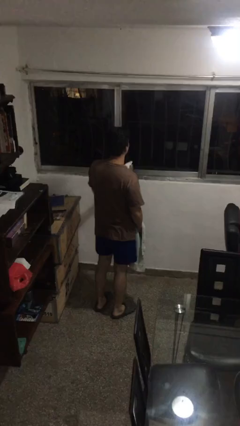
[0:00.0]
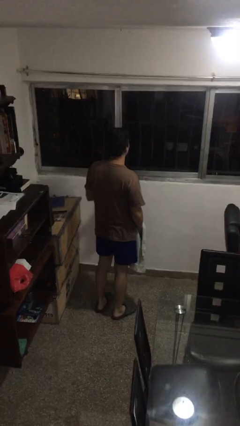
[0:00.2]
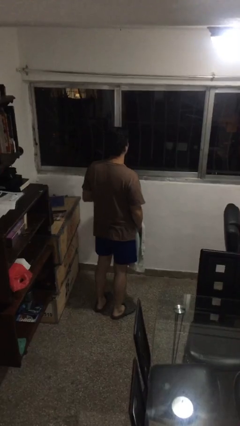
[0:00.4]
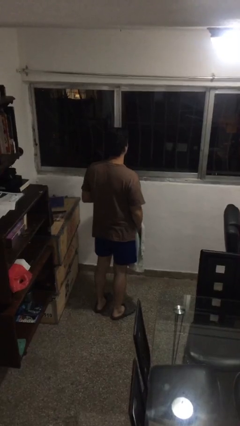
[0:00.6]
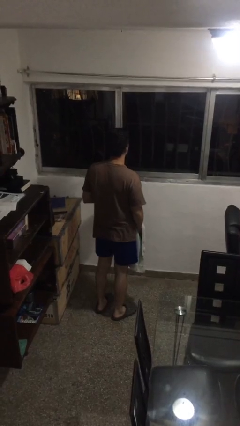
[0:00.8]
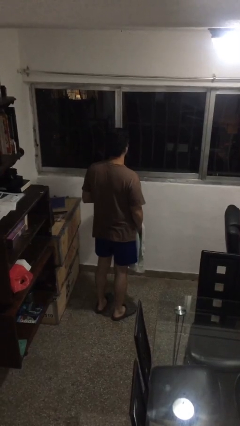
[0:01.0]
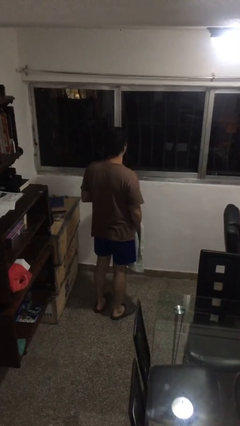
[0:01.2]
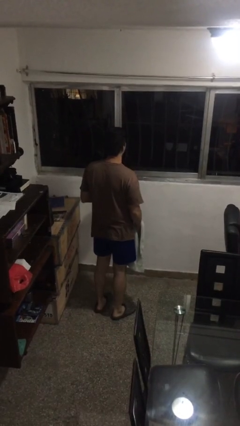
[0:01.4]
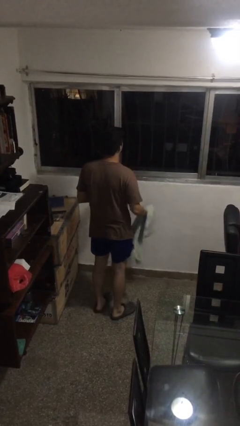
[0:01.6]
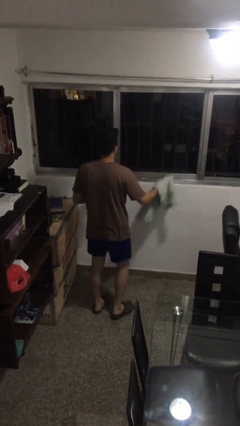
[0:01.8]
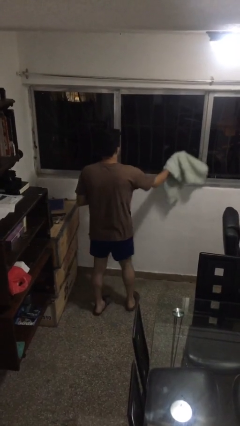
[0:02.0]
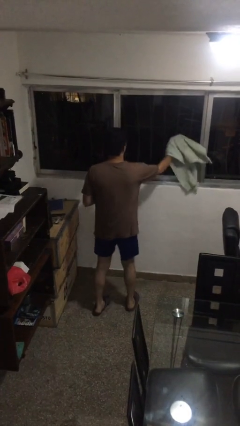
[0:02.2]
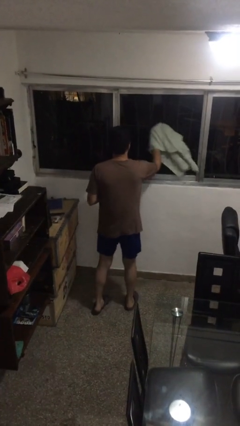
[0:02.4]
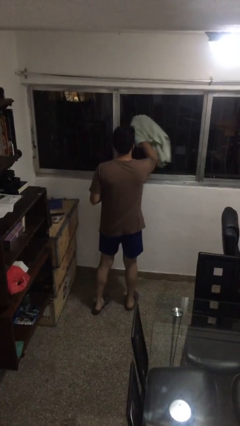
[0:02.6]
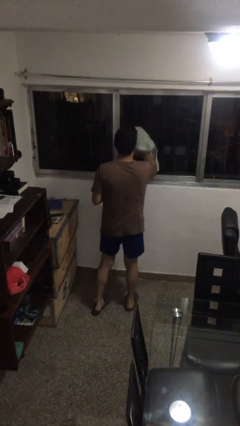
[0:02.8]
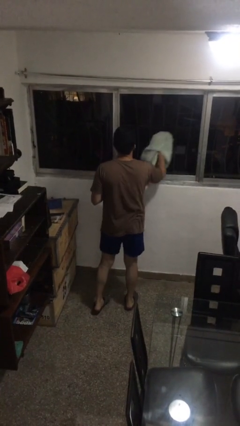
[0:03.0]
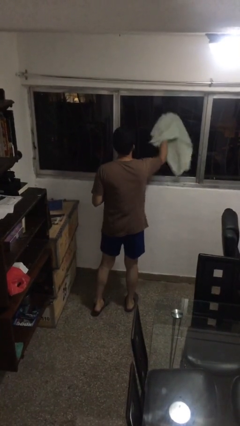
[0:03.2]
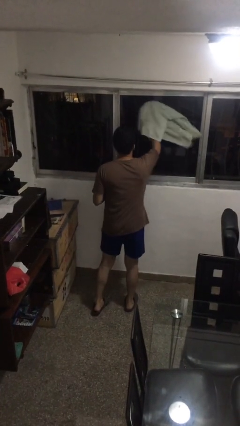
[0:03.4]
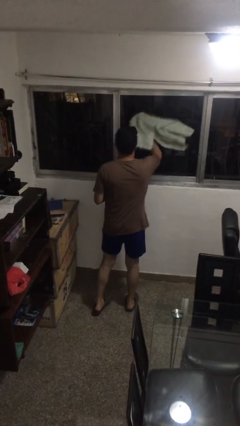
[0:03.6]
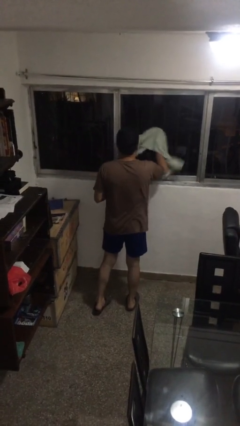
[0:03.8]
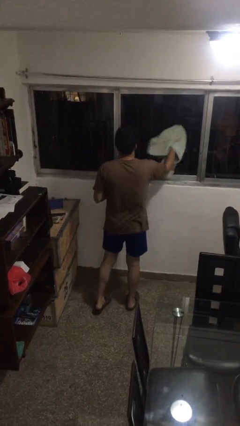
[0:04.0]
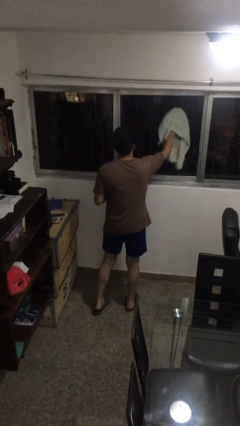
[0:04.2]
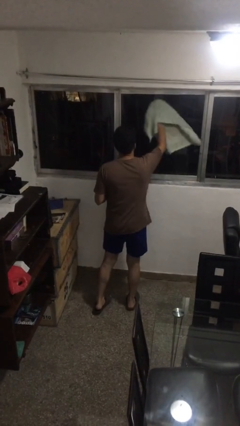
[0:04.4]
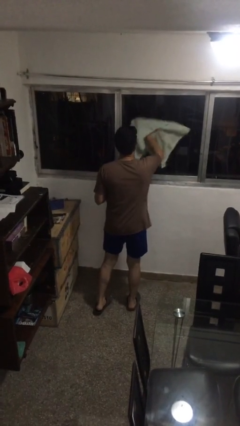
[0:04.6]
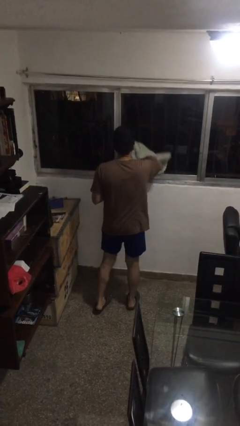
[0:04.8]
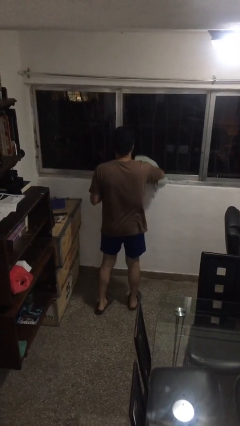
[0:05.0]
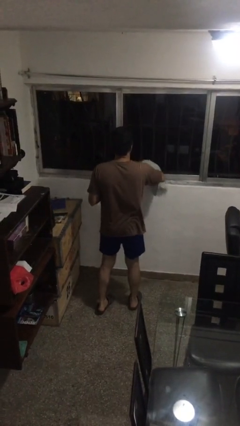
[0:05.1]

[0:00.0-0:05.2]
person washes window

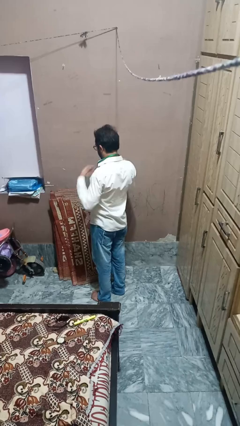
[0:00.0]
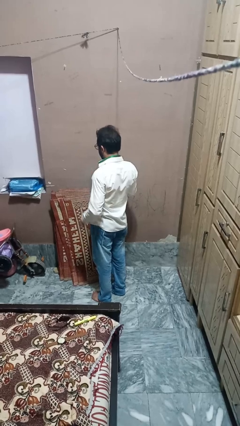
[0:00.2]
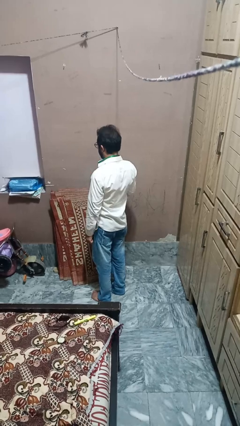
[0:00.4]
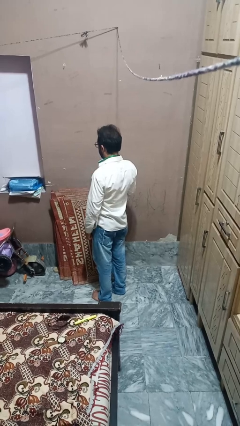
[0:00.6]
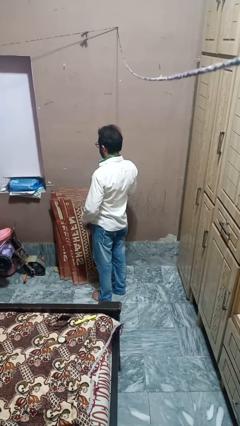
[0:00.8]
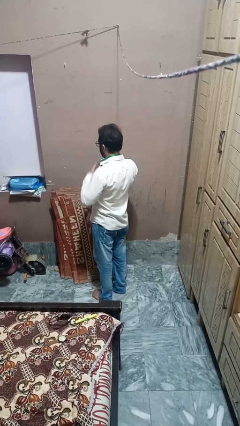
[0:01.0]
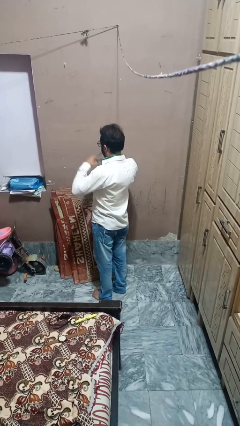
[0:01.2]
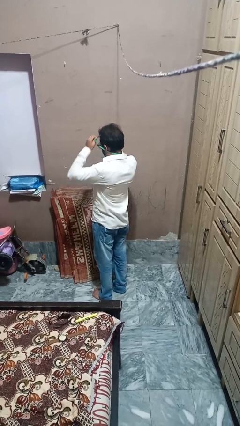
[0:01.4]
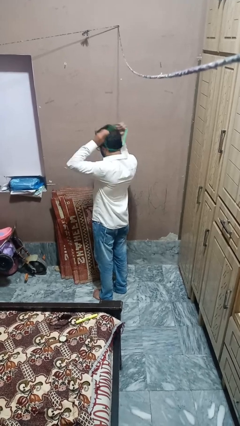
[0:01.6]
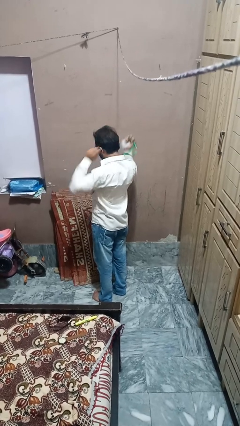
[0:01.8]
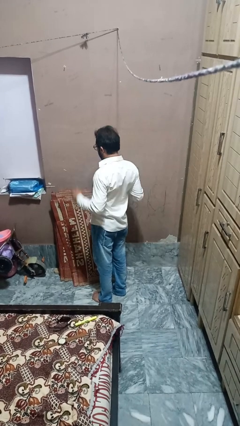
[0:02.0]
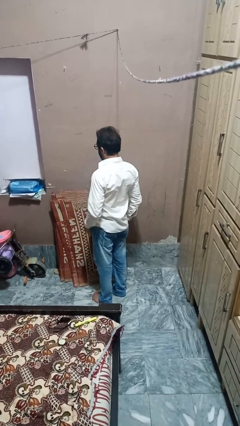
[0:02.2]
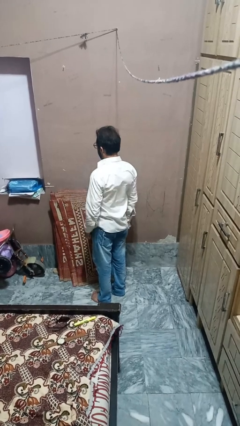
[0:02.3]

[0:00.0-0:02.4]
person takes off necklace

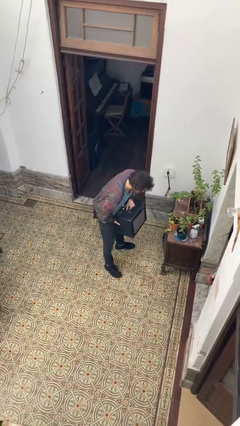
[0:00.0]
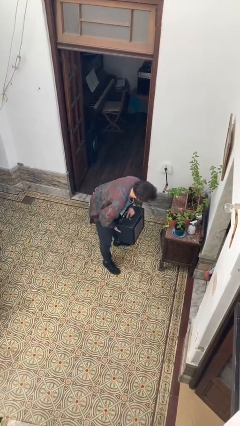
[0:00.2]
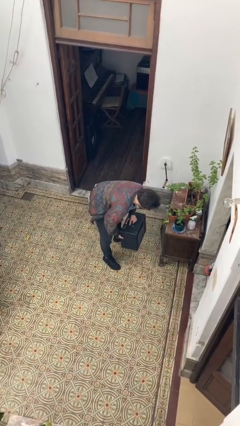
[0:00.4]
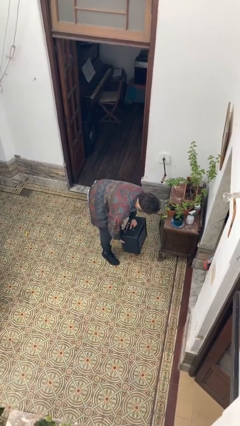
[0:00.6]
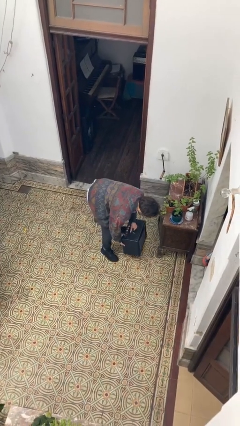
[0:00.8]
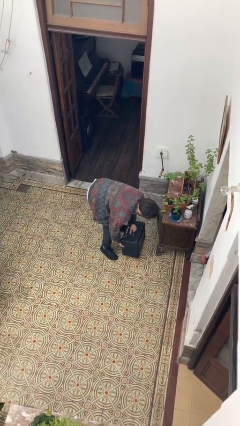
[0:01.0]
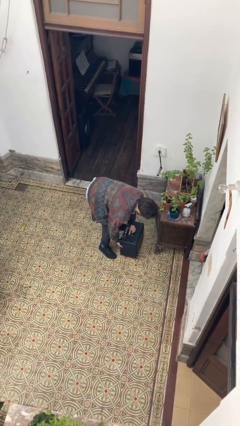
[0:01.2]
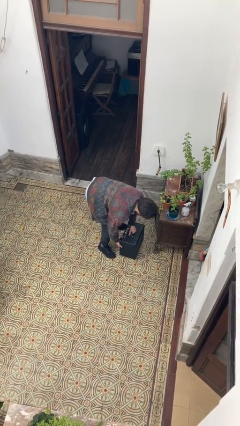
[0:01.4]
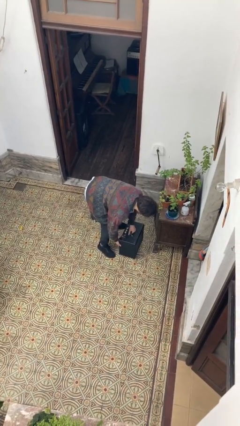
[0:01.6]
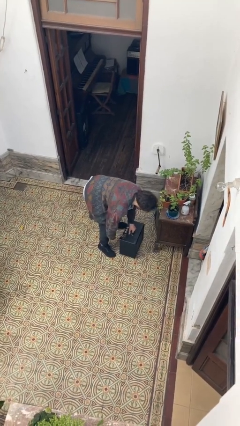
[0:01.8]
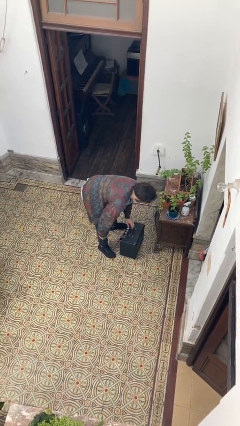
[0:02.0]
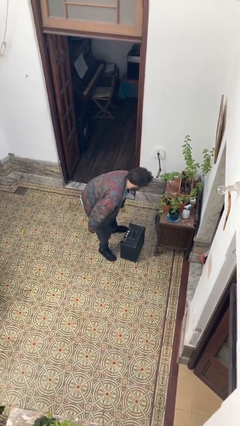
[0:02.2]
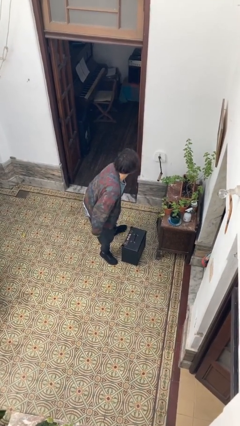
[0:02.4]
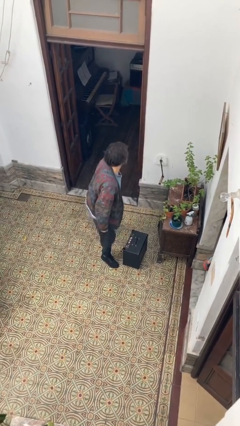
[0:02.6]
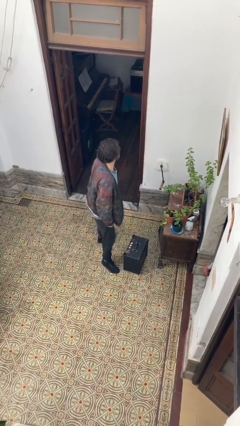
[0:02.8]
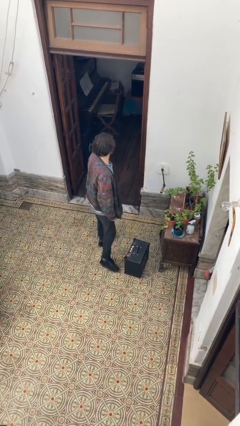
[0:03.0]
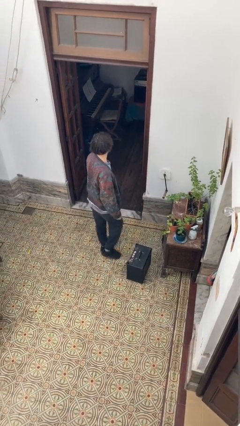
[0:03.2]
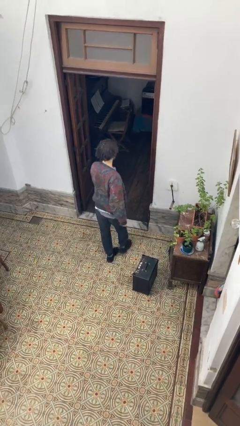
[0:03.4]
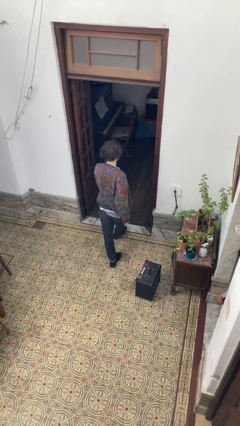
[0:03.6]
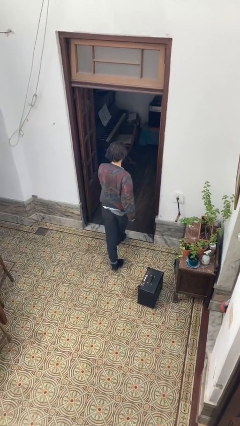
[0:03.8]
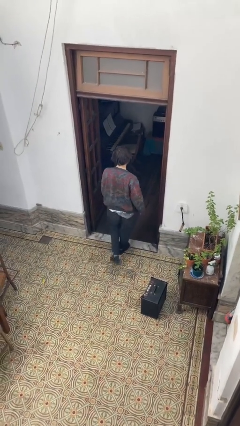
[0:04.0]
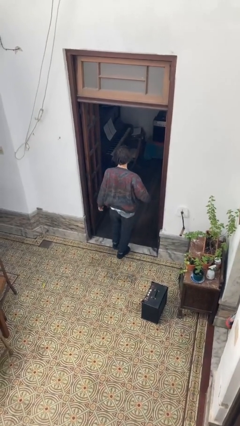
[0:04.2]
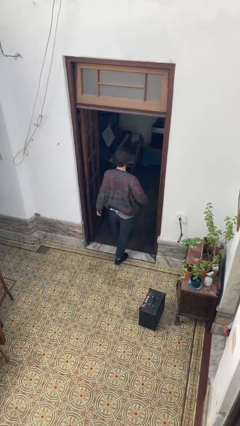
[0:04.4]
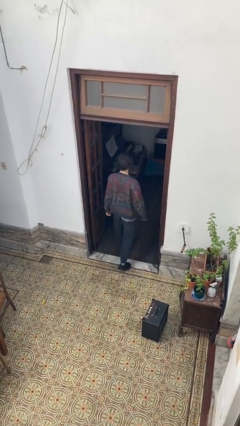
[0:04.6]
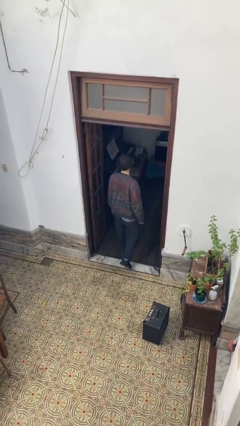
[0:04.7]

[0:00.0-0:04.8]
person puts down object on floor

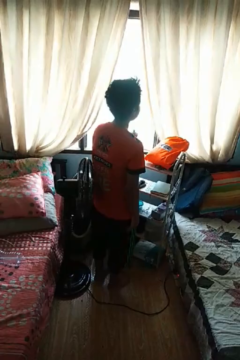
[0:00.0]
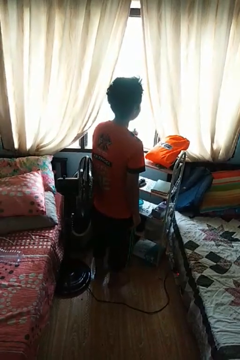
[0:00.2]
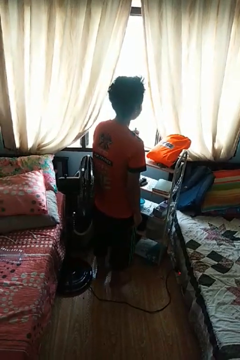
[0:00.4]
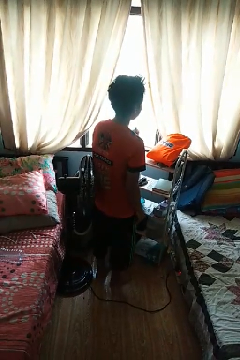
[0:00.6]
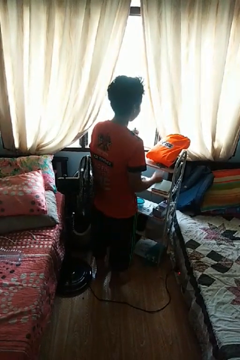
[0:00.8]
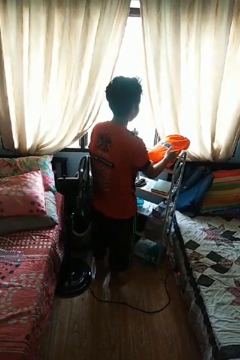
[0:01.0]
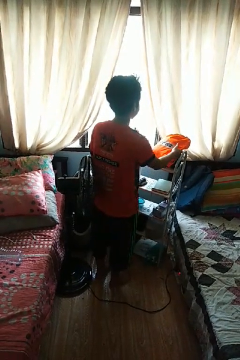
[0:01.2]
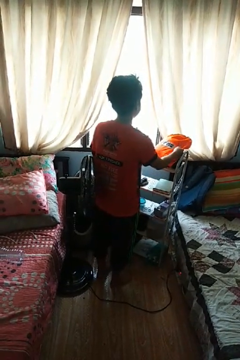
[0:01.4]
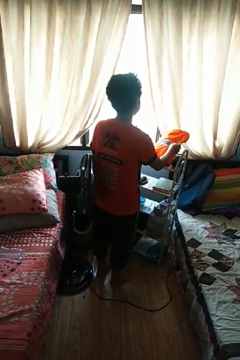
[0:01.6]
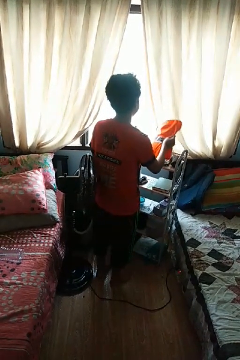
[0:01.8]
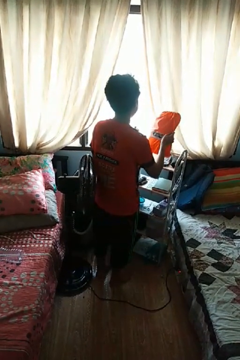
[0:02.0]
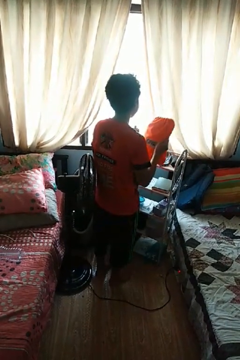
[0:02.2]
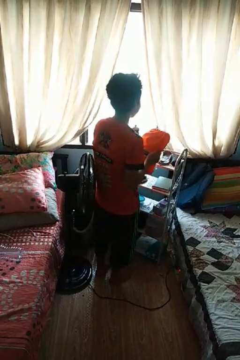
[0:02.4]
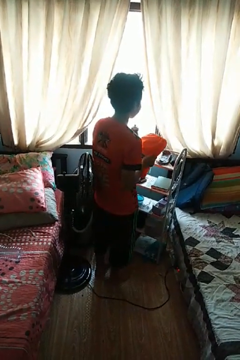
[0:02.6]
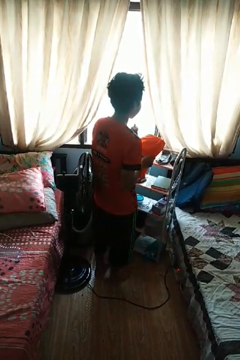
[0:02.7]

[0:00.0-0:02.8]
person picks up object from countertop

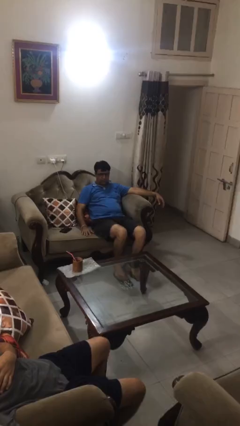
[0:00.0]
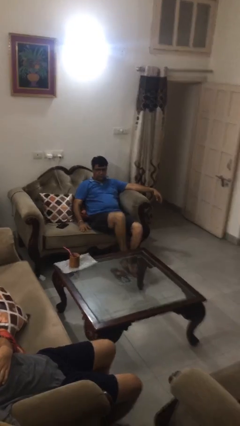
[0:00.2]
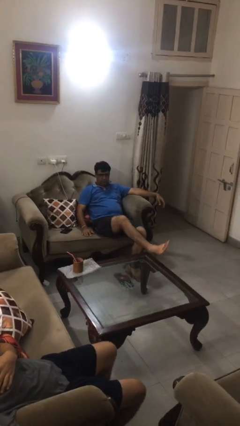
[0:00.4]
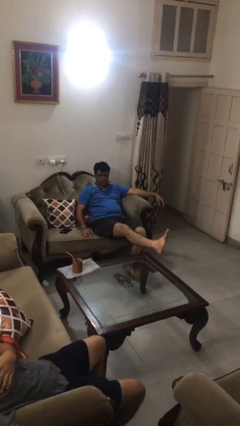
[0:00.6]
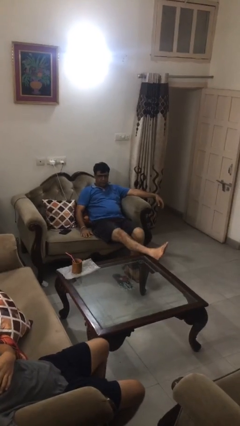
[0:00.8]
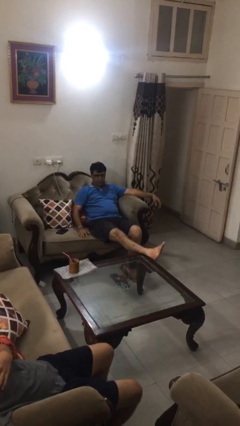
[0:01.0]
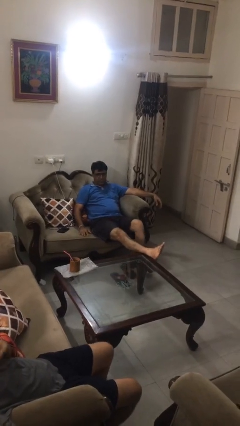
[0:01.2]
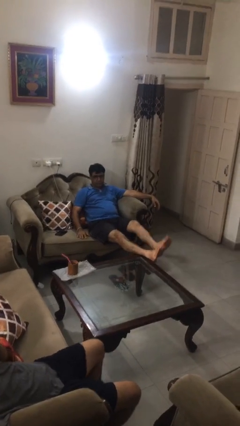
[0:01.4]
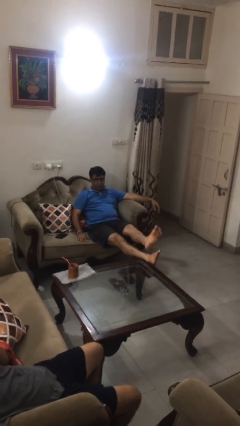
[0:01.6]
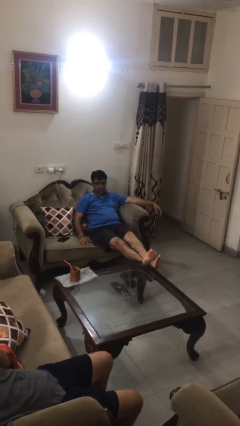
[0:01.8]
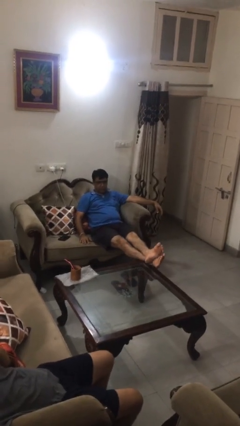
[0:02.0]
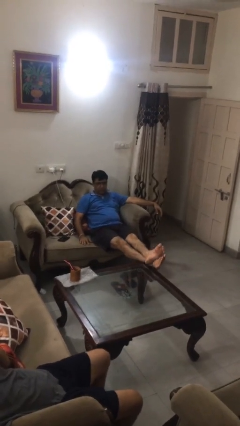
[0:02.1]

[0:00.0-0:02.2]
person puts feet up

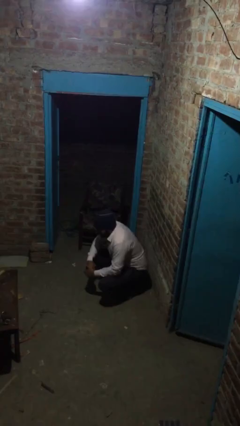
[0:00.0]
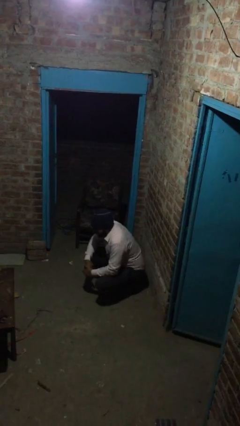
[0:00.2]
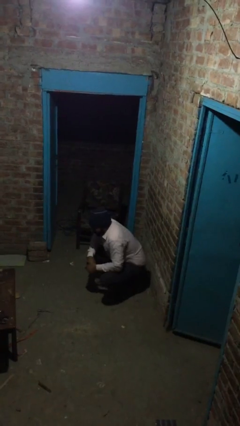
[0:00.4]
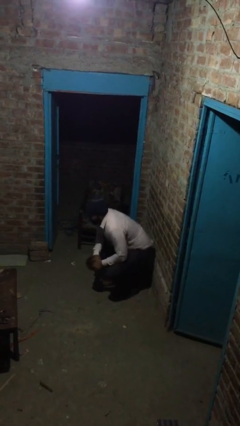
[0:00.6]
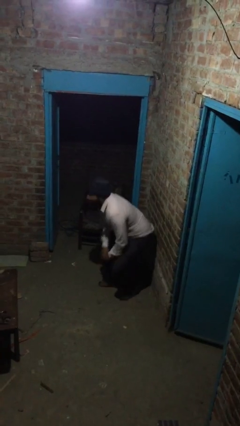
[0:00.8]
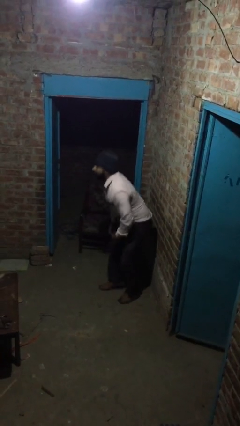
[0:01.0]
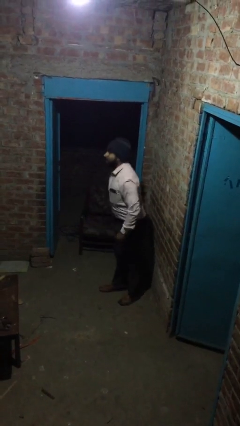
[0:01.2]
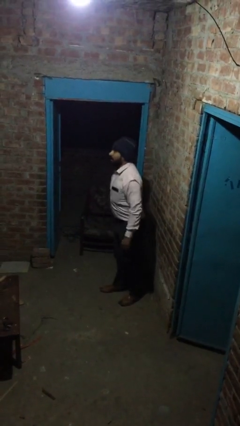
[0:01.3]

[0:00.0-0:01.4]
person stands up
